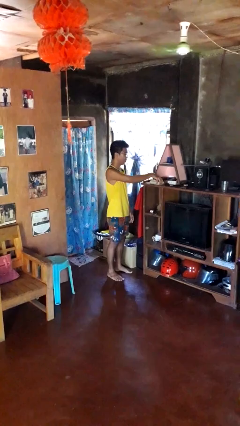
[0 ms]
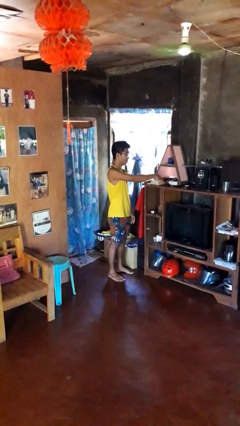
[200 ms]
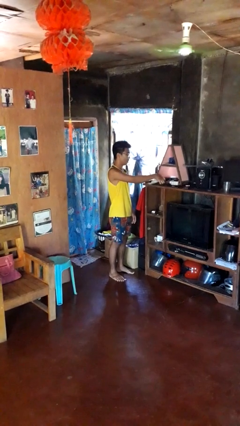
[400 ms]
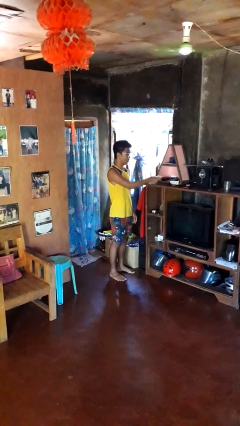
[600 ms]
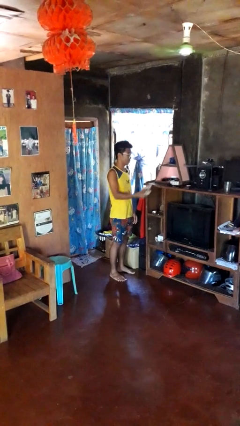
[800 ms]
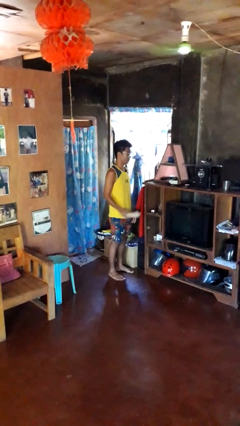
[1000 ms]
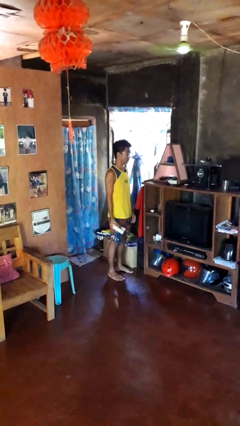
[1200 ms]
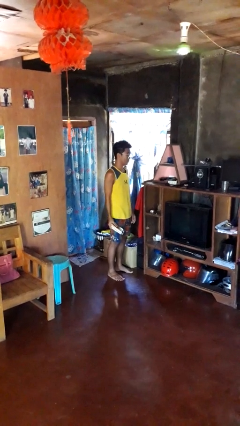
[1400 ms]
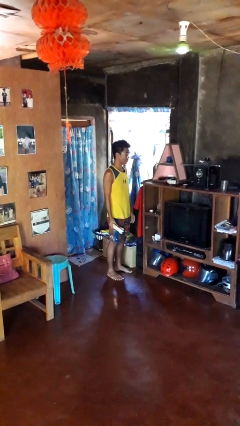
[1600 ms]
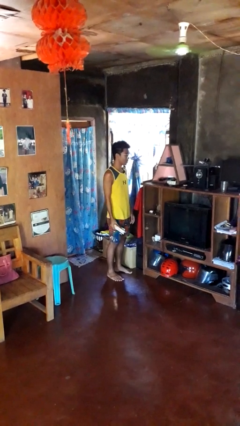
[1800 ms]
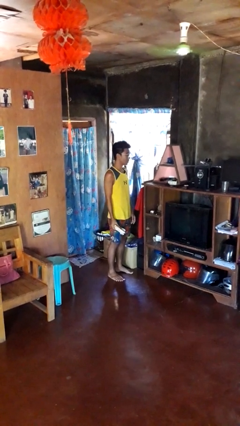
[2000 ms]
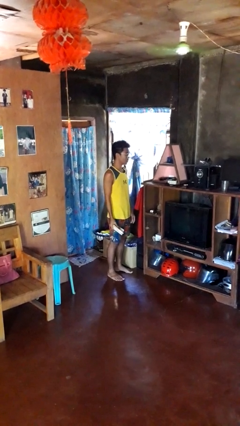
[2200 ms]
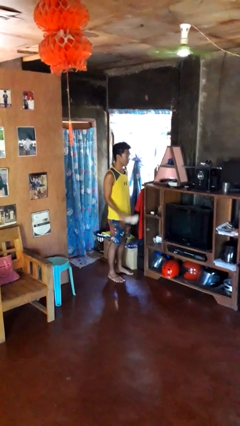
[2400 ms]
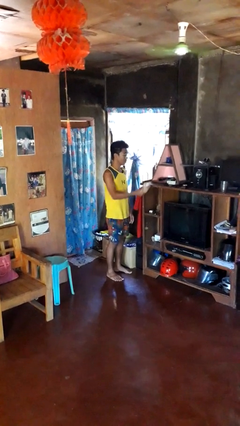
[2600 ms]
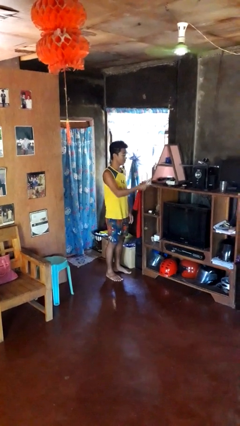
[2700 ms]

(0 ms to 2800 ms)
person picks up object from shelf

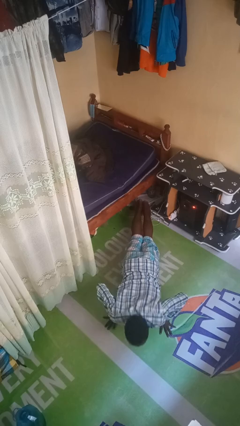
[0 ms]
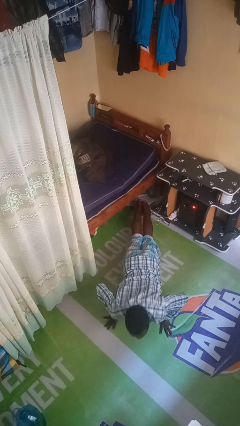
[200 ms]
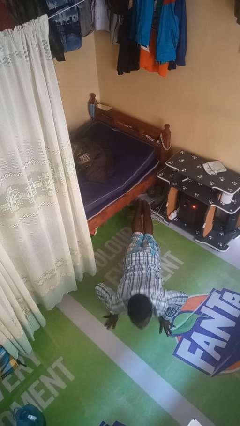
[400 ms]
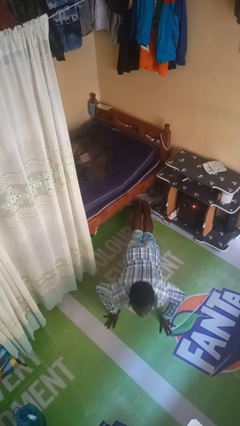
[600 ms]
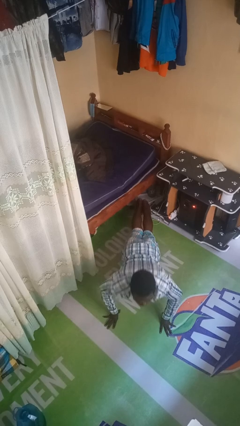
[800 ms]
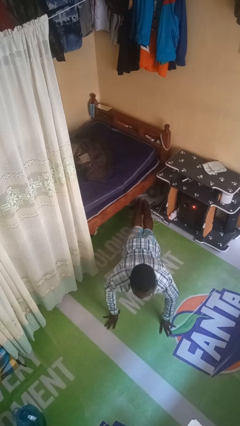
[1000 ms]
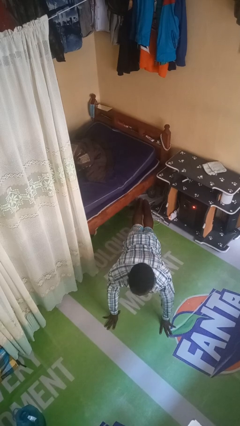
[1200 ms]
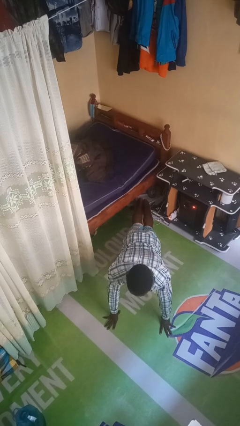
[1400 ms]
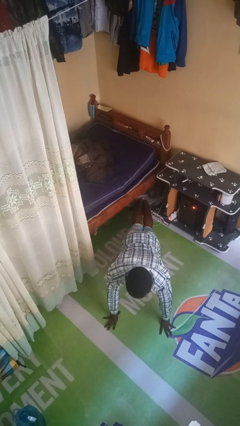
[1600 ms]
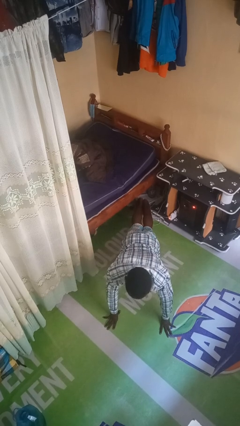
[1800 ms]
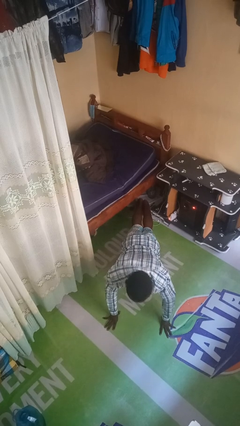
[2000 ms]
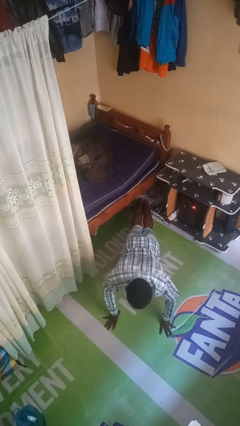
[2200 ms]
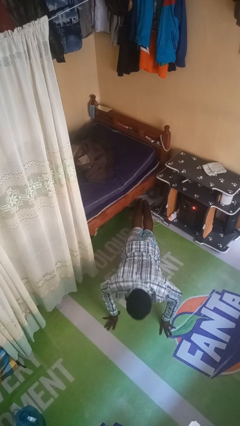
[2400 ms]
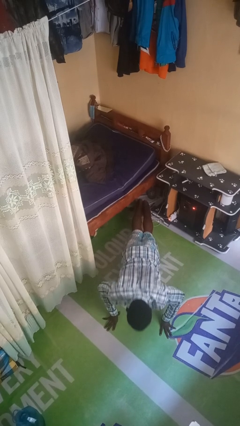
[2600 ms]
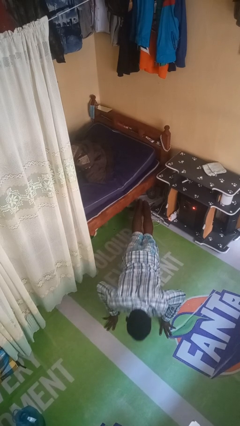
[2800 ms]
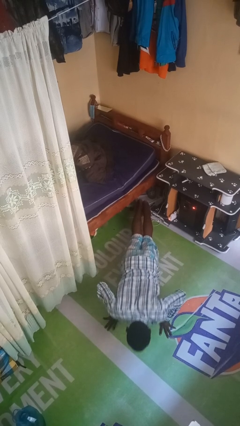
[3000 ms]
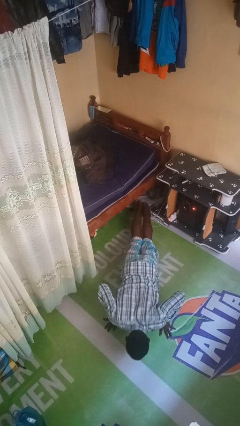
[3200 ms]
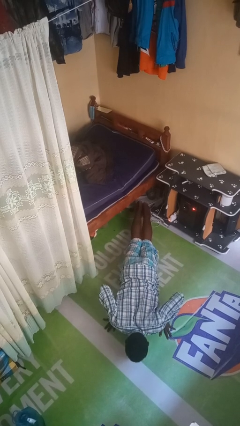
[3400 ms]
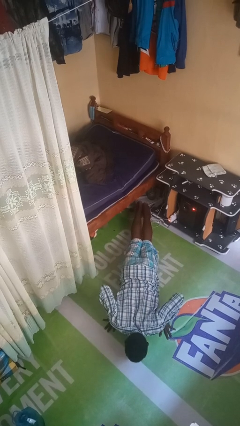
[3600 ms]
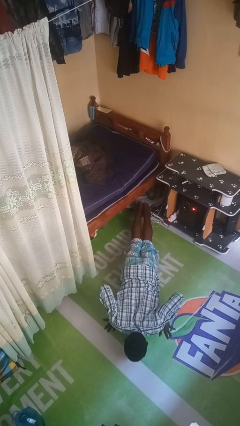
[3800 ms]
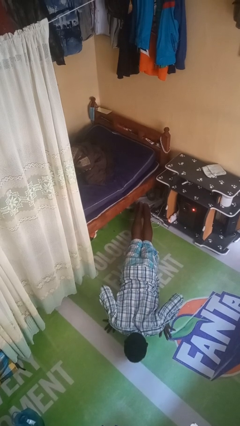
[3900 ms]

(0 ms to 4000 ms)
person exercises with pushup

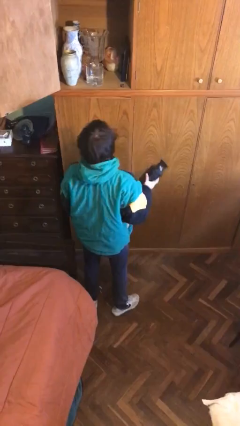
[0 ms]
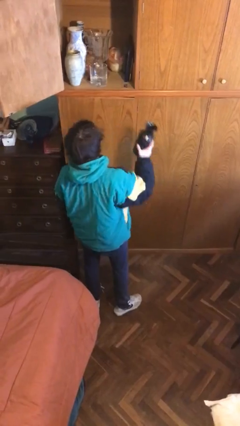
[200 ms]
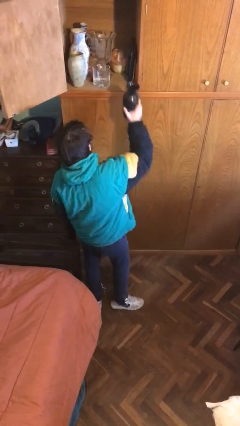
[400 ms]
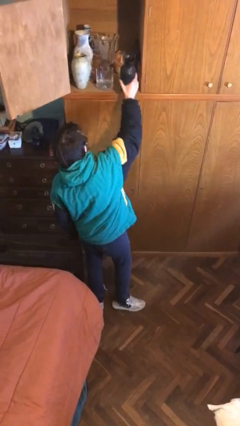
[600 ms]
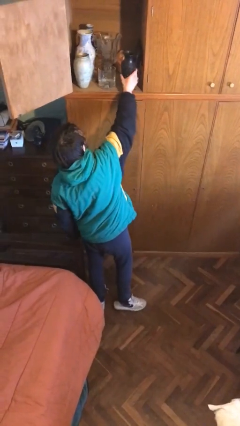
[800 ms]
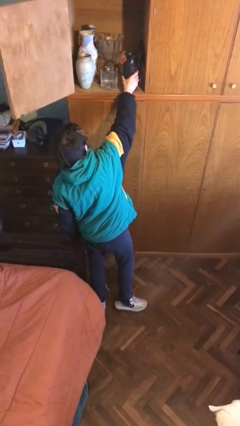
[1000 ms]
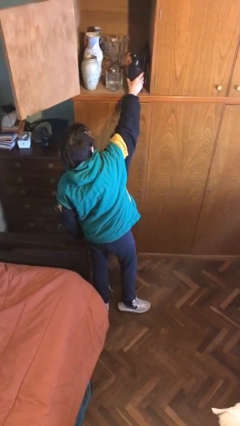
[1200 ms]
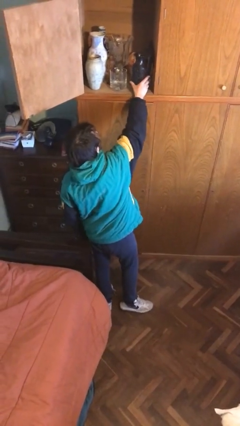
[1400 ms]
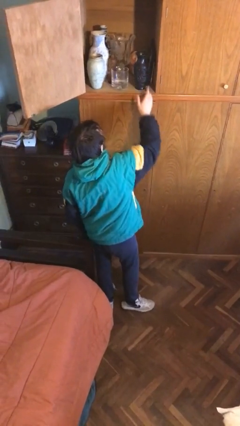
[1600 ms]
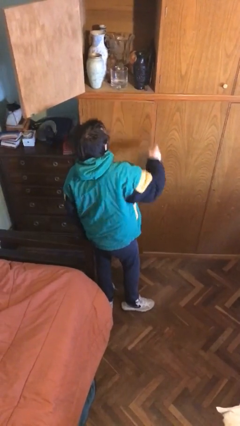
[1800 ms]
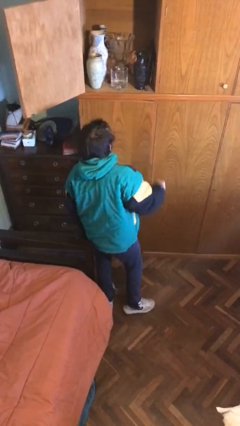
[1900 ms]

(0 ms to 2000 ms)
person puts down object into cabinet

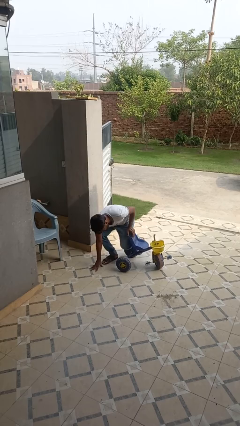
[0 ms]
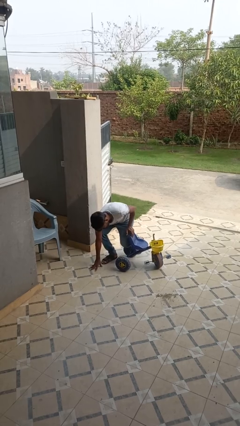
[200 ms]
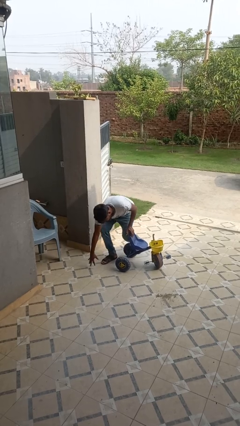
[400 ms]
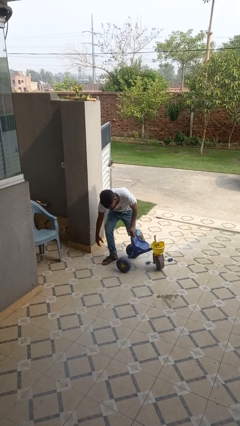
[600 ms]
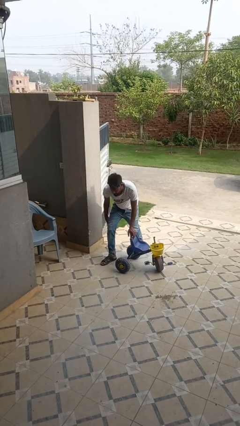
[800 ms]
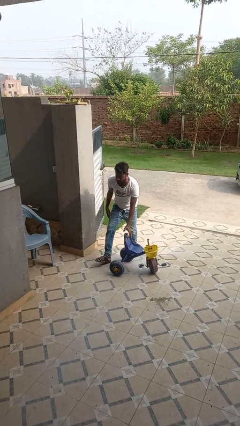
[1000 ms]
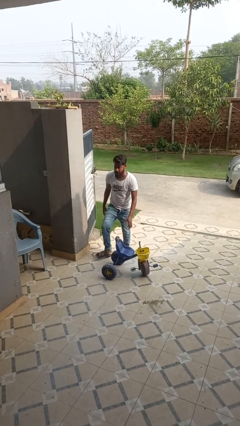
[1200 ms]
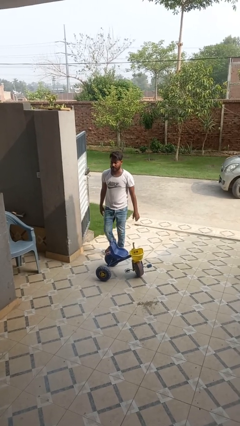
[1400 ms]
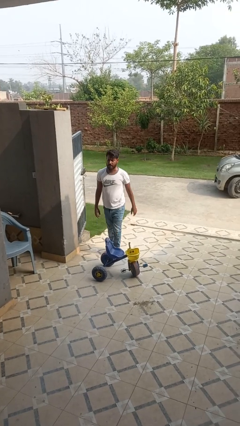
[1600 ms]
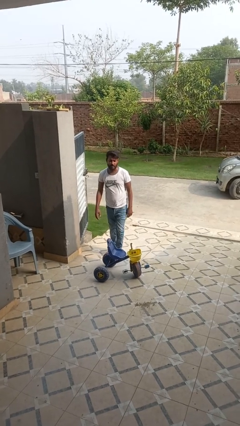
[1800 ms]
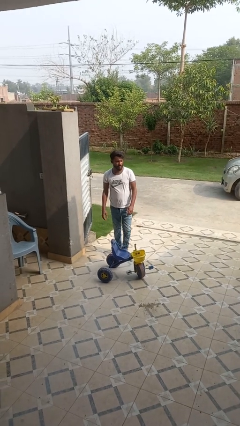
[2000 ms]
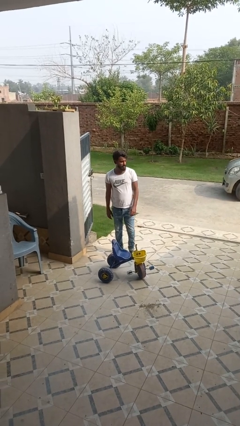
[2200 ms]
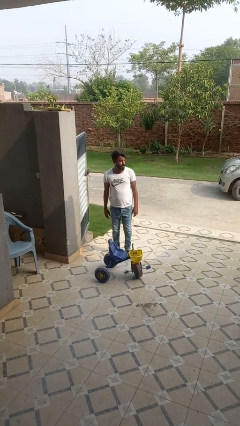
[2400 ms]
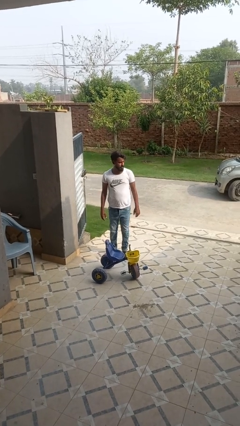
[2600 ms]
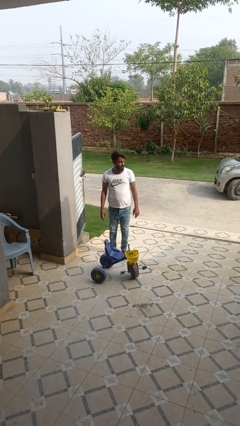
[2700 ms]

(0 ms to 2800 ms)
person stands up from floor

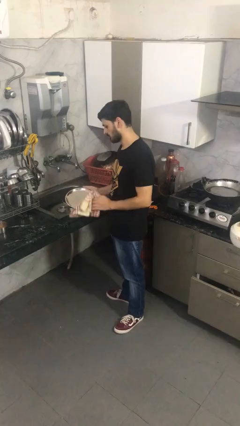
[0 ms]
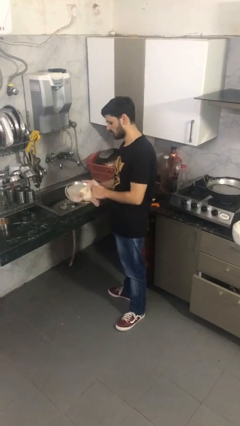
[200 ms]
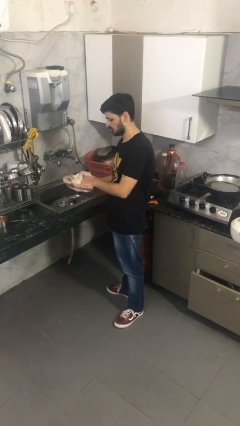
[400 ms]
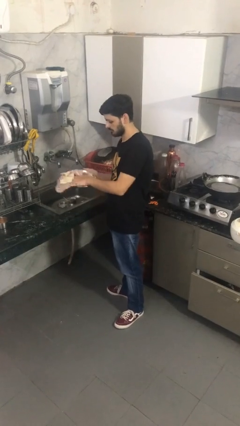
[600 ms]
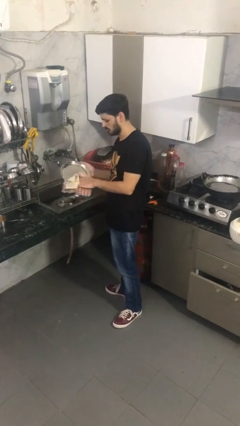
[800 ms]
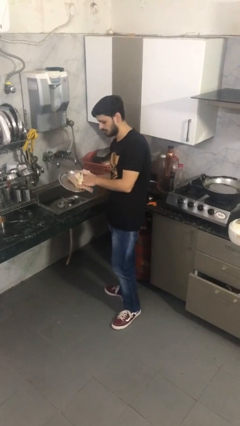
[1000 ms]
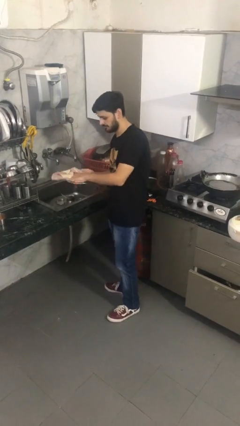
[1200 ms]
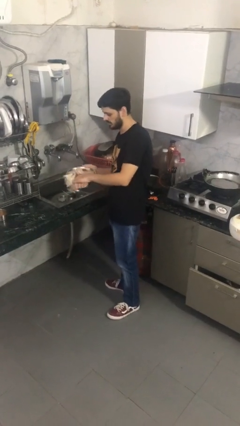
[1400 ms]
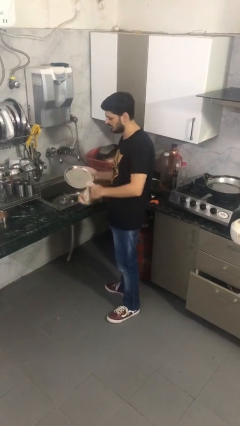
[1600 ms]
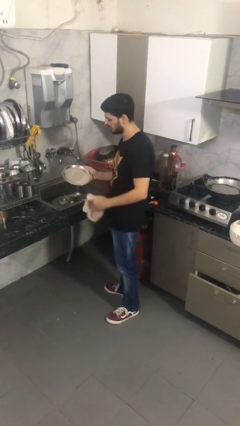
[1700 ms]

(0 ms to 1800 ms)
person dries dish

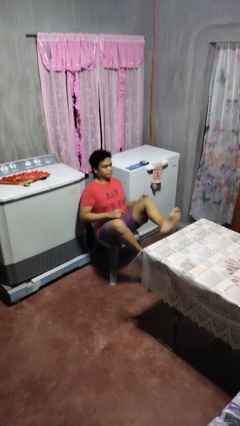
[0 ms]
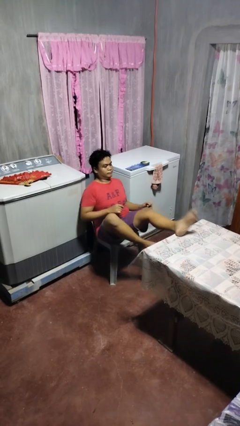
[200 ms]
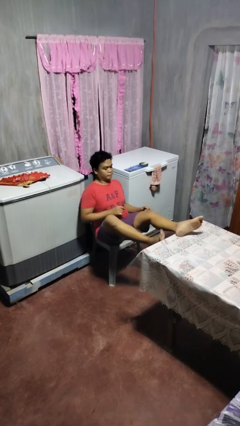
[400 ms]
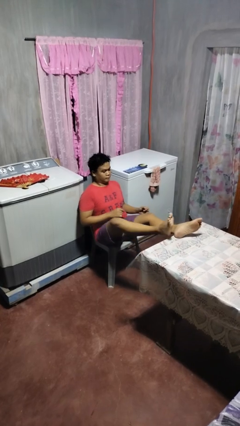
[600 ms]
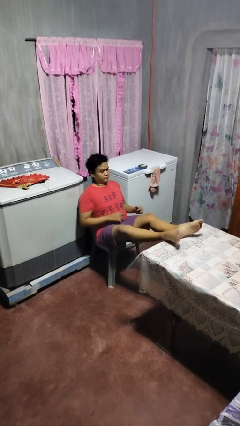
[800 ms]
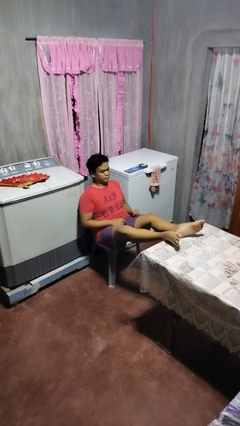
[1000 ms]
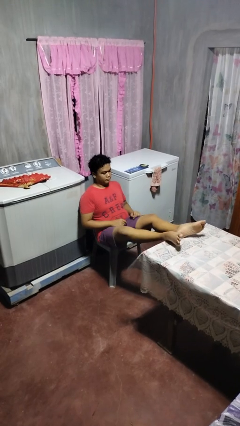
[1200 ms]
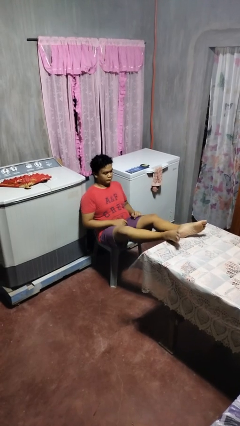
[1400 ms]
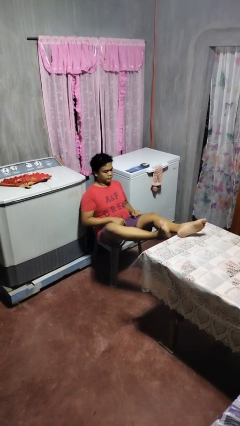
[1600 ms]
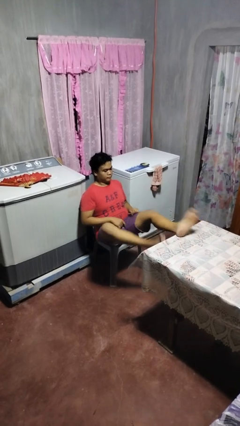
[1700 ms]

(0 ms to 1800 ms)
person puts feet up

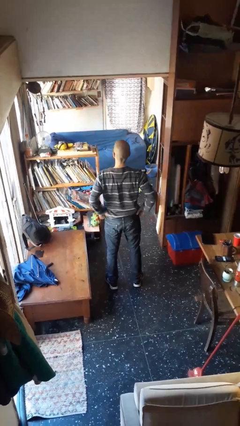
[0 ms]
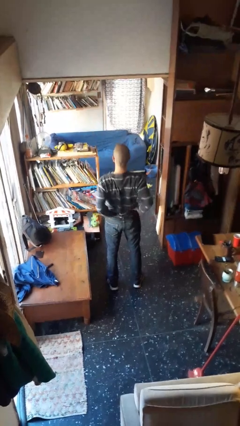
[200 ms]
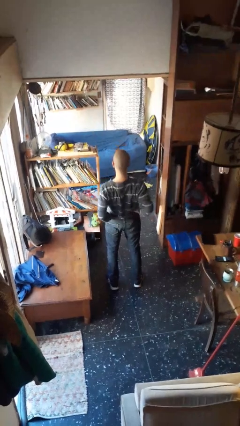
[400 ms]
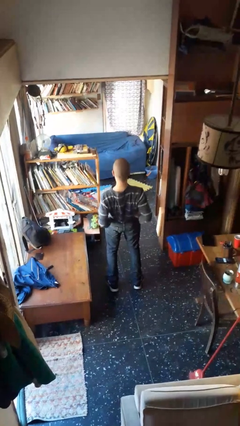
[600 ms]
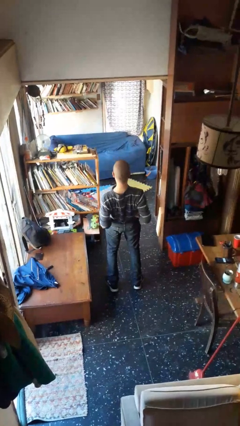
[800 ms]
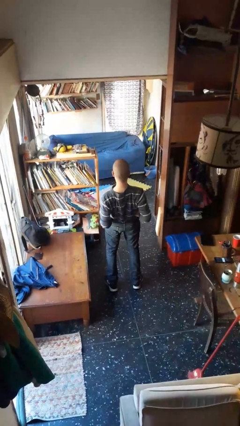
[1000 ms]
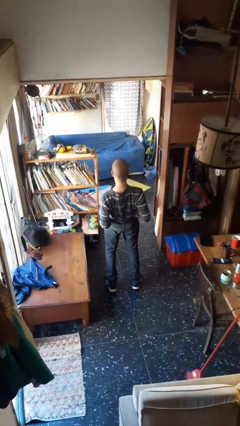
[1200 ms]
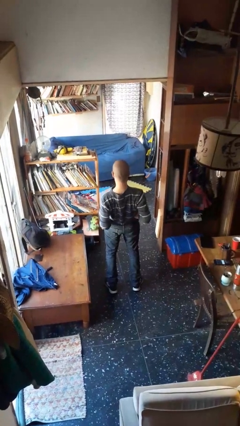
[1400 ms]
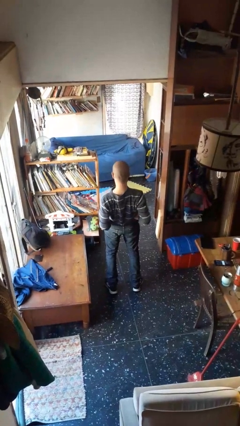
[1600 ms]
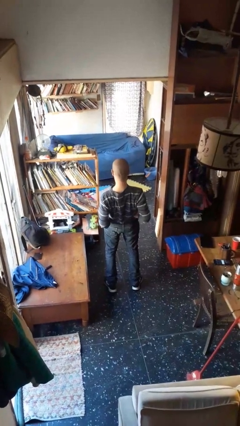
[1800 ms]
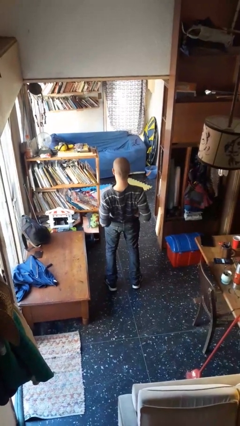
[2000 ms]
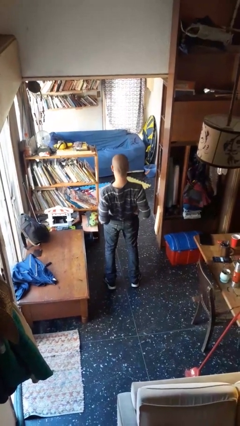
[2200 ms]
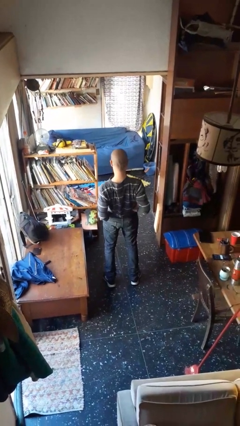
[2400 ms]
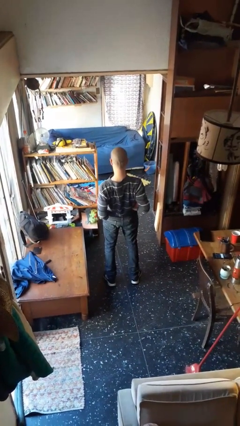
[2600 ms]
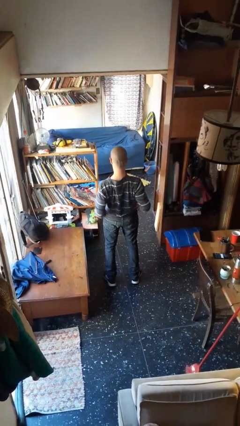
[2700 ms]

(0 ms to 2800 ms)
person stretches back
